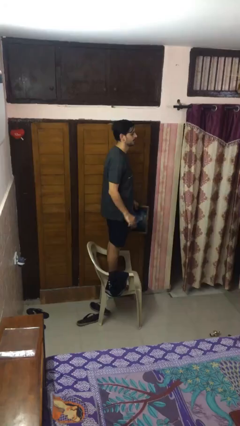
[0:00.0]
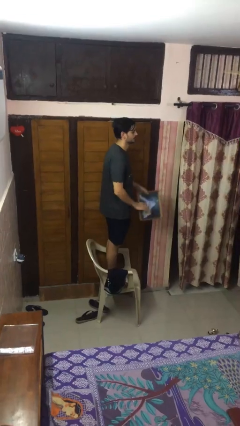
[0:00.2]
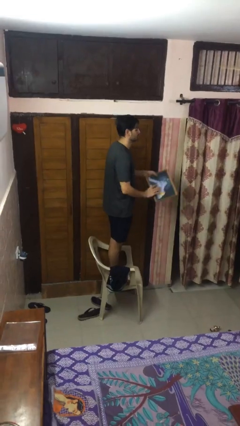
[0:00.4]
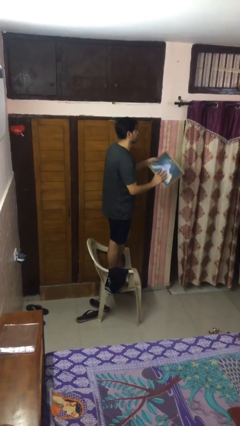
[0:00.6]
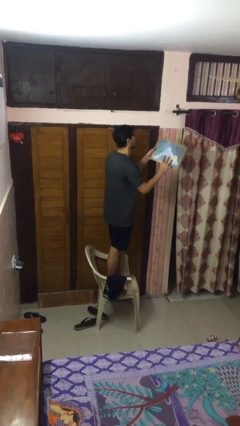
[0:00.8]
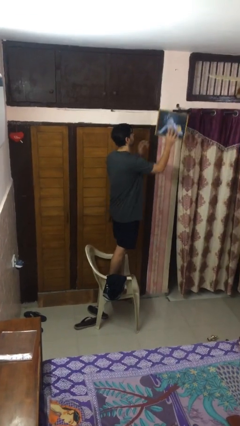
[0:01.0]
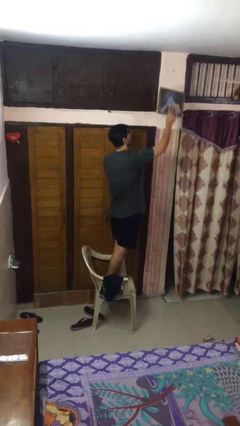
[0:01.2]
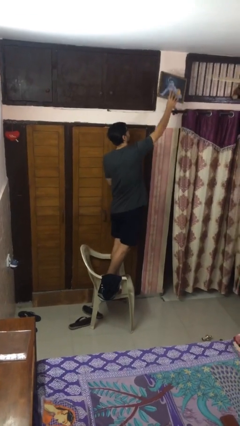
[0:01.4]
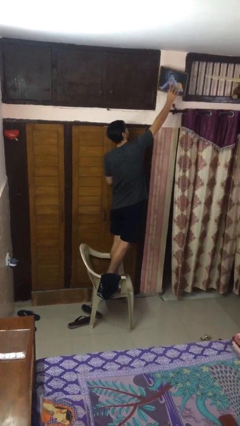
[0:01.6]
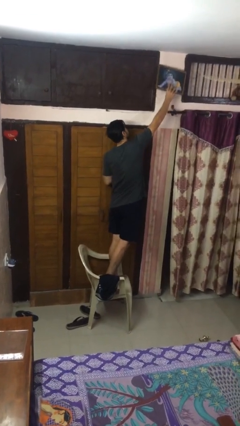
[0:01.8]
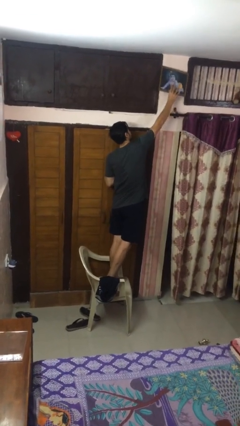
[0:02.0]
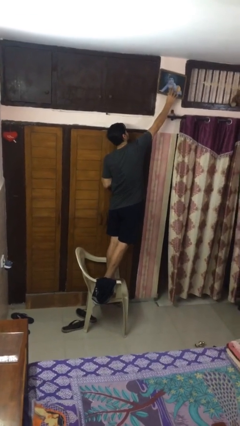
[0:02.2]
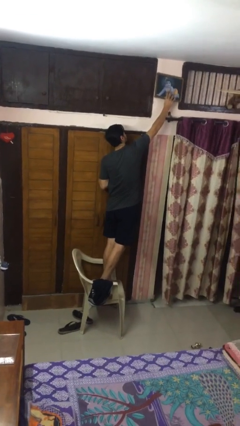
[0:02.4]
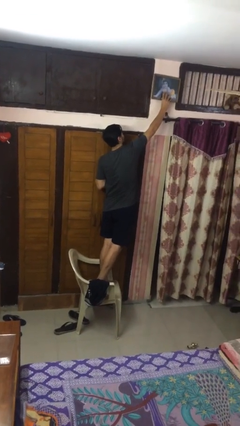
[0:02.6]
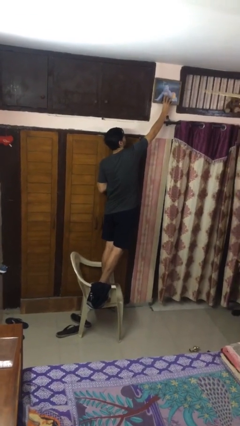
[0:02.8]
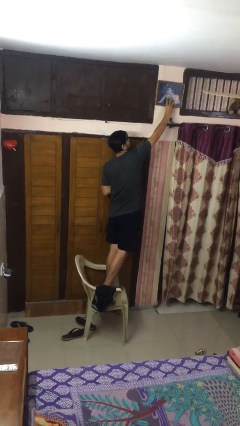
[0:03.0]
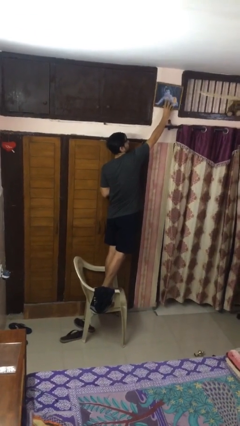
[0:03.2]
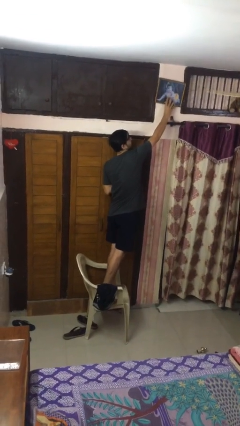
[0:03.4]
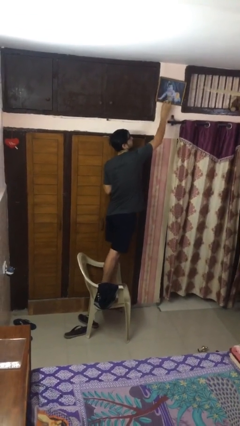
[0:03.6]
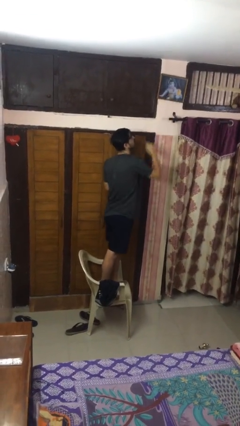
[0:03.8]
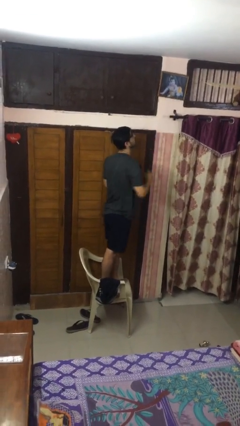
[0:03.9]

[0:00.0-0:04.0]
person puts up picture frame

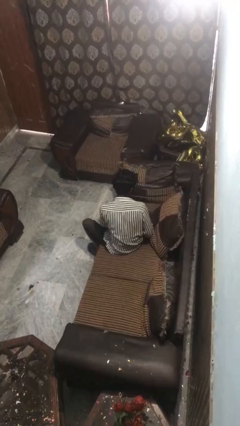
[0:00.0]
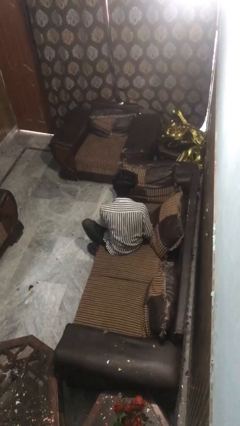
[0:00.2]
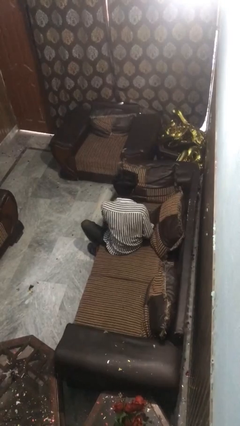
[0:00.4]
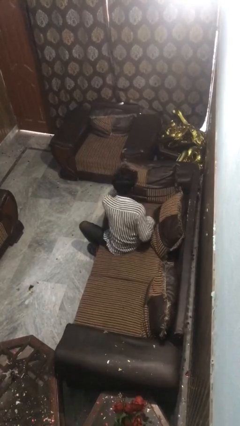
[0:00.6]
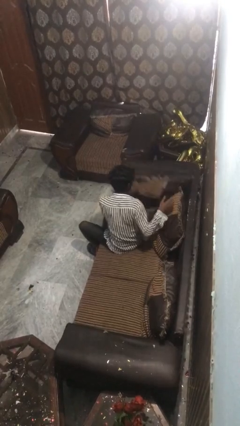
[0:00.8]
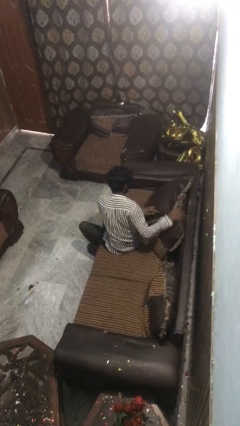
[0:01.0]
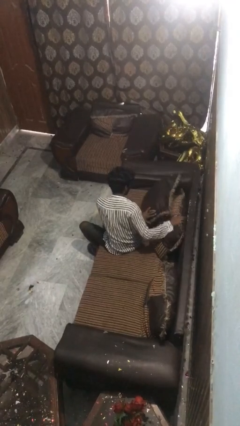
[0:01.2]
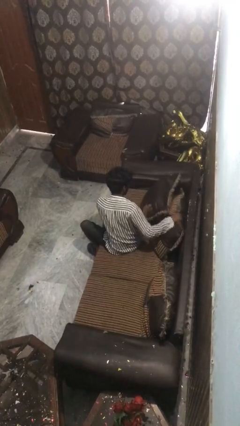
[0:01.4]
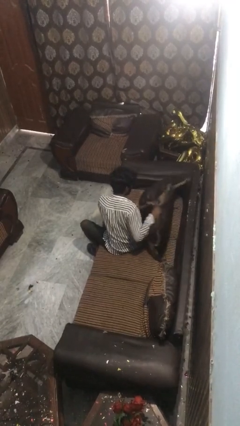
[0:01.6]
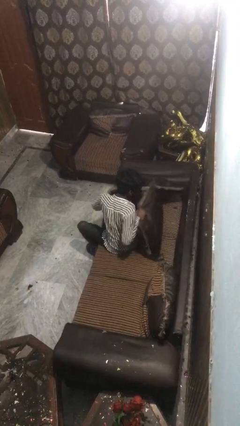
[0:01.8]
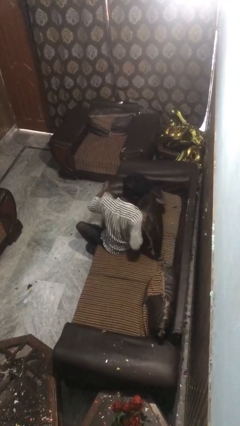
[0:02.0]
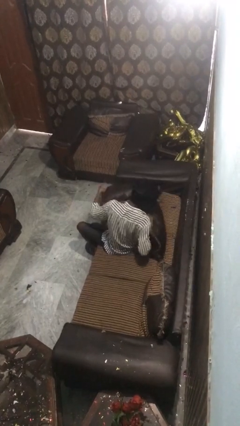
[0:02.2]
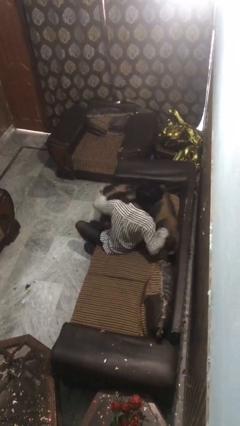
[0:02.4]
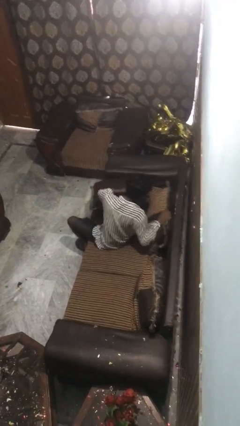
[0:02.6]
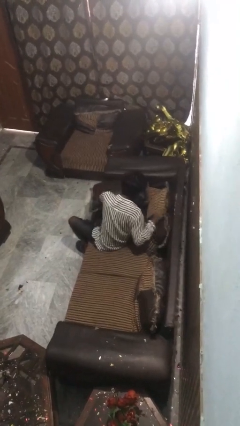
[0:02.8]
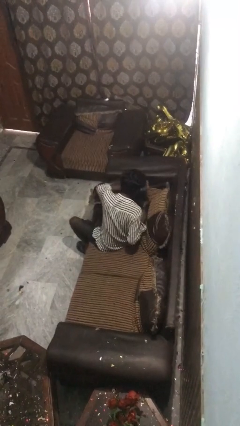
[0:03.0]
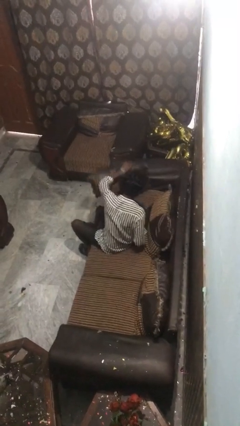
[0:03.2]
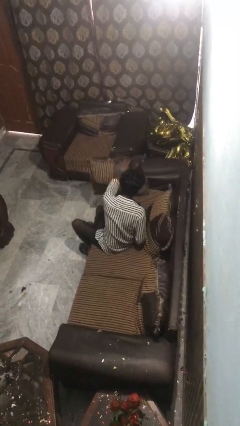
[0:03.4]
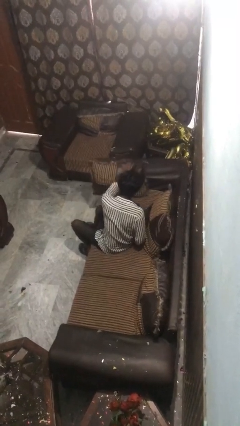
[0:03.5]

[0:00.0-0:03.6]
person searches in couch

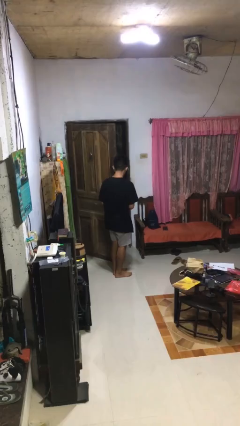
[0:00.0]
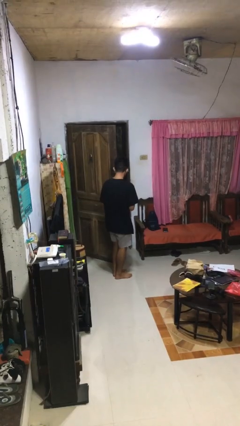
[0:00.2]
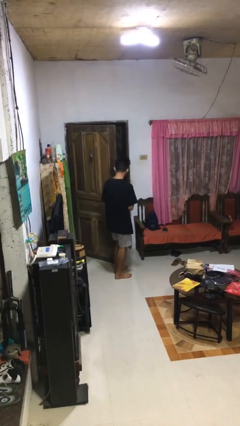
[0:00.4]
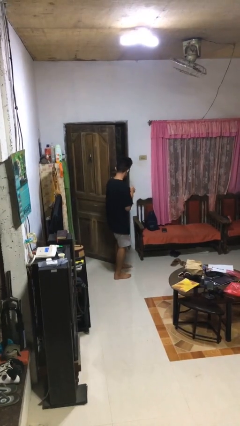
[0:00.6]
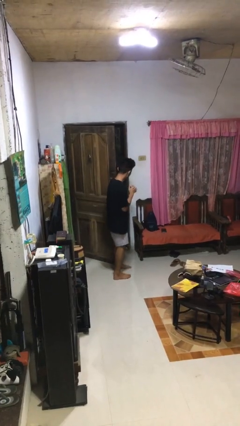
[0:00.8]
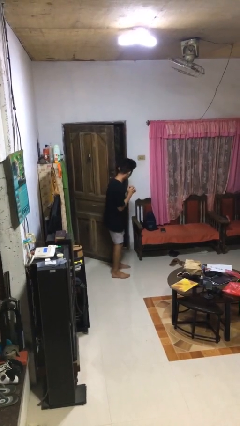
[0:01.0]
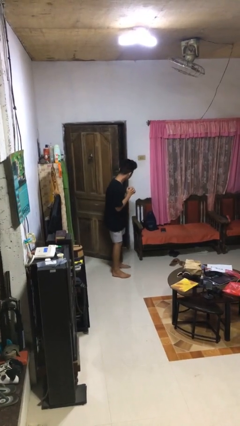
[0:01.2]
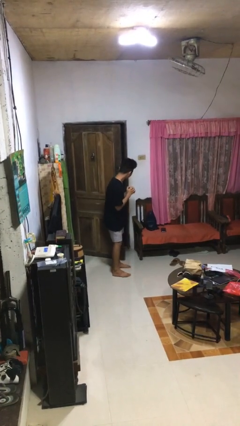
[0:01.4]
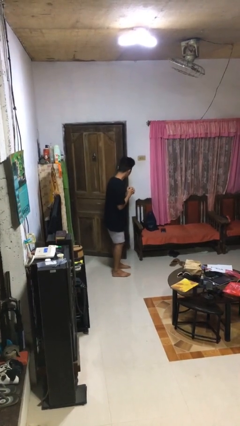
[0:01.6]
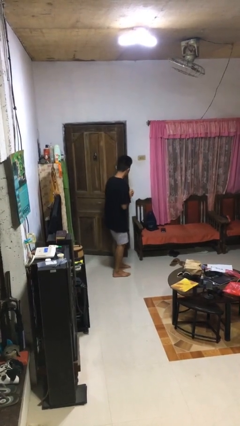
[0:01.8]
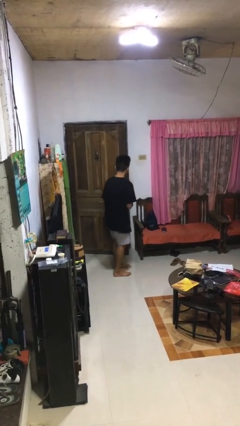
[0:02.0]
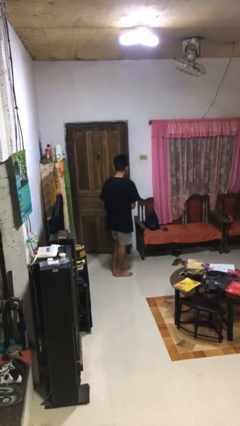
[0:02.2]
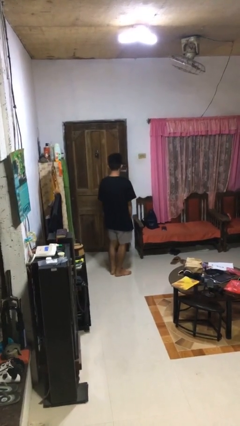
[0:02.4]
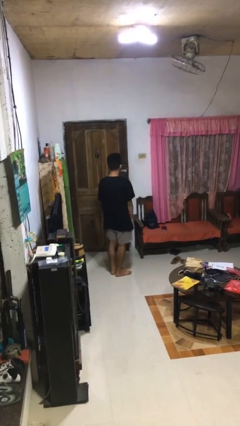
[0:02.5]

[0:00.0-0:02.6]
person closes door with hip

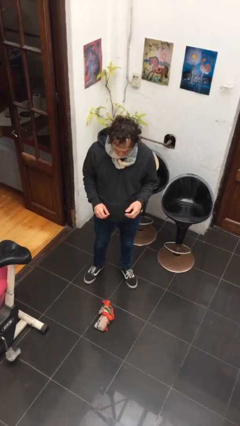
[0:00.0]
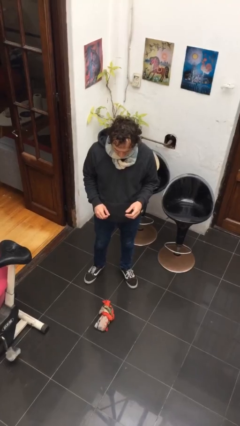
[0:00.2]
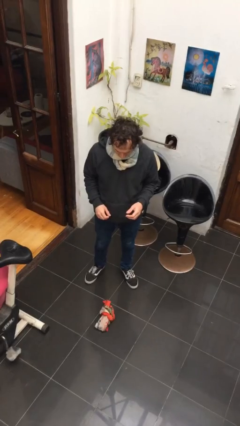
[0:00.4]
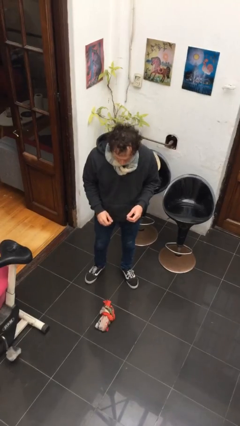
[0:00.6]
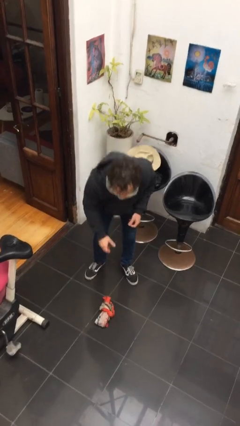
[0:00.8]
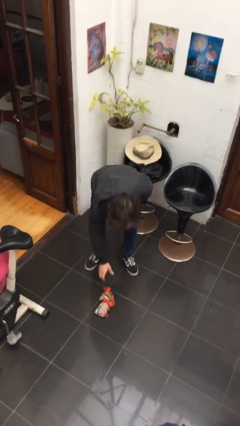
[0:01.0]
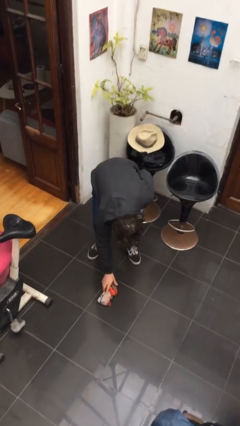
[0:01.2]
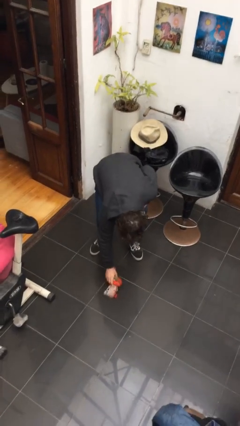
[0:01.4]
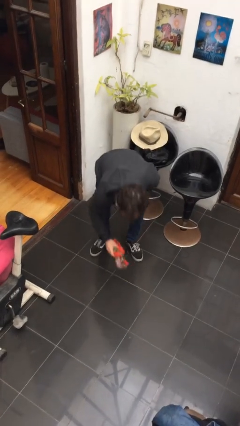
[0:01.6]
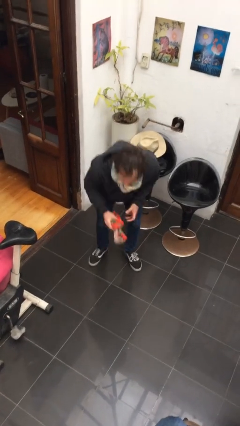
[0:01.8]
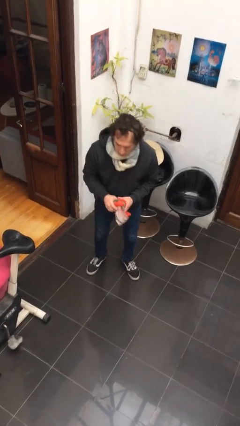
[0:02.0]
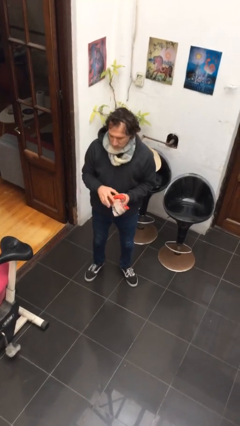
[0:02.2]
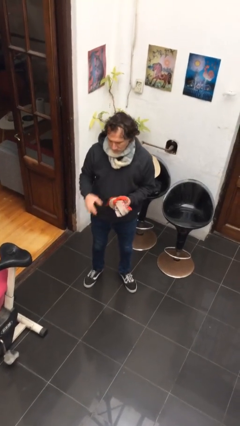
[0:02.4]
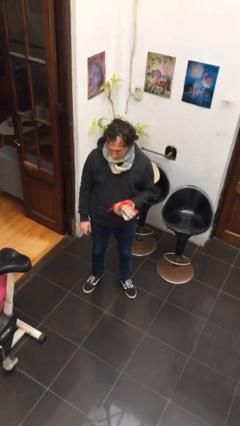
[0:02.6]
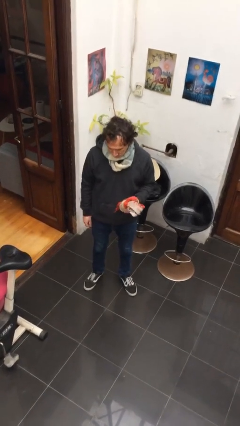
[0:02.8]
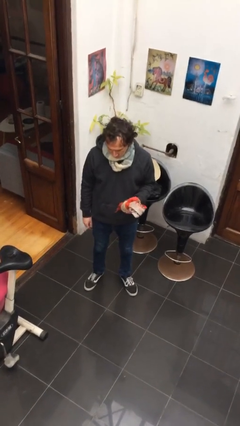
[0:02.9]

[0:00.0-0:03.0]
person picks up object from floor

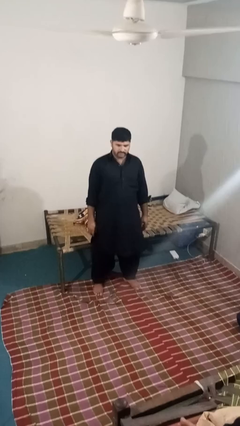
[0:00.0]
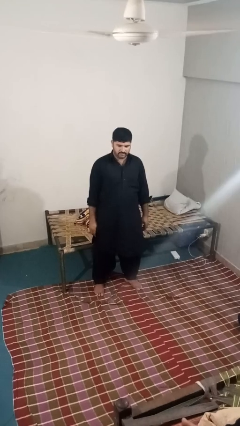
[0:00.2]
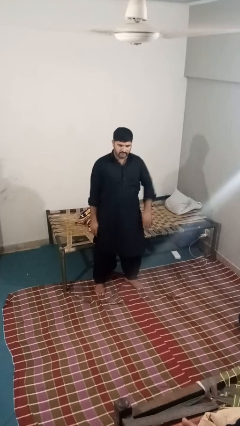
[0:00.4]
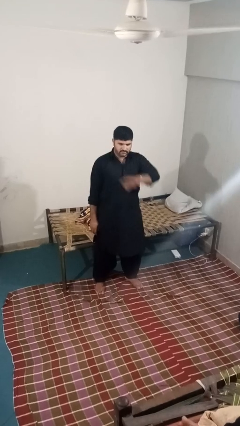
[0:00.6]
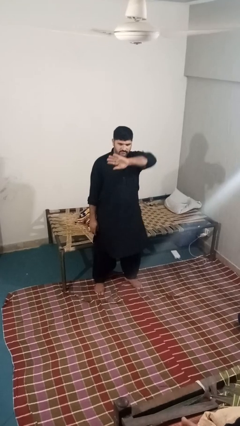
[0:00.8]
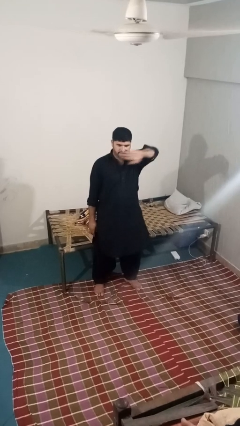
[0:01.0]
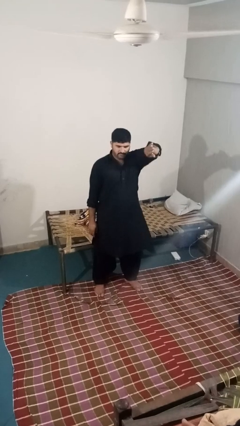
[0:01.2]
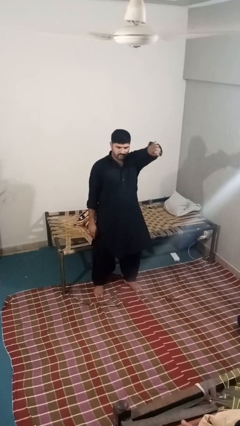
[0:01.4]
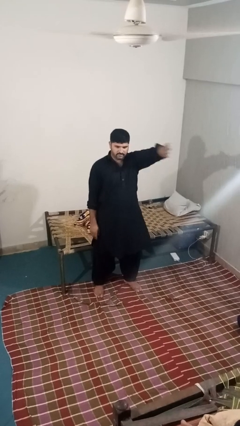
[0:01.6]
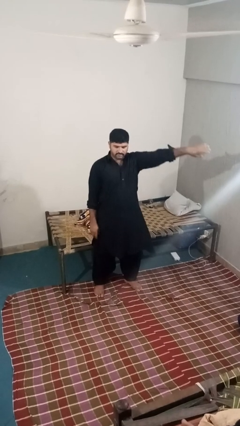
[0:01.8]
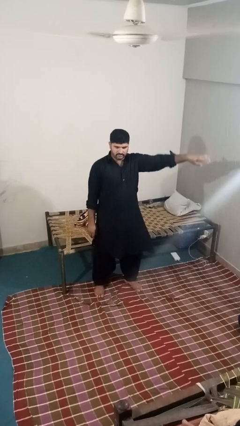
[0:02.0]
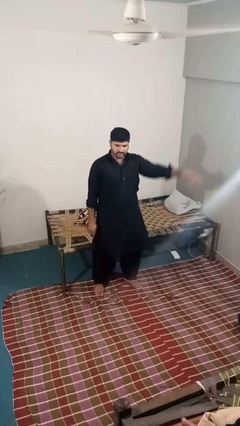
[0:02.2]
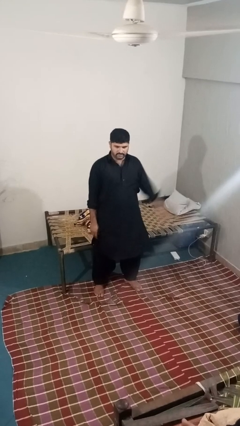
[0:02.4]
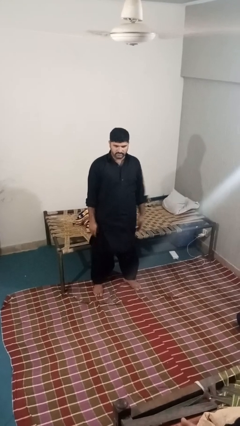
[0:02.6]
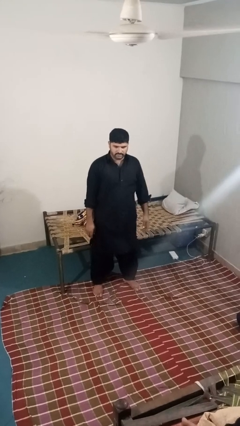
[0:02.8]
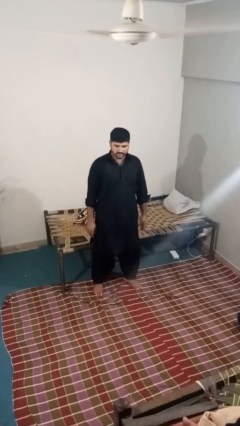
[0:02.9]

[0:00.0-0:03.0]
person gestures swipe left

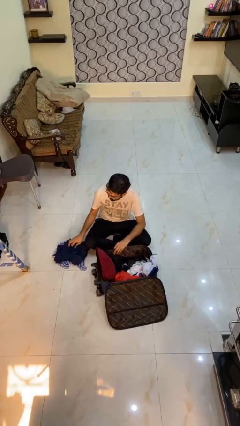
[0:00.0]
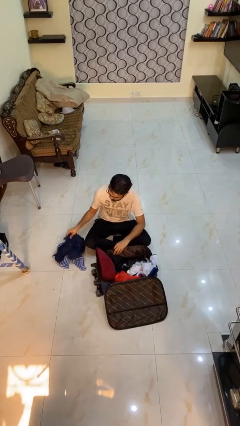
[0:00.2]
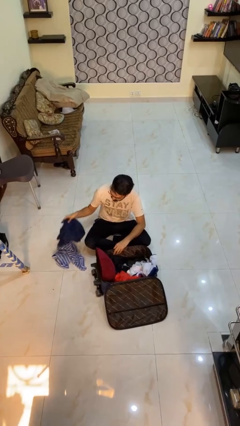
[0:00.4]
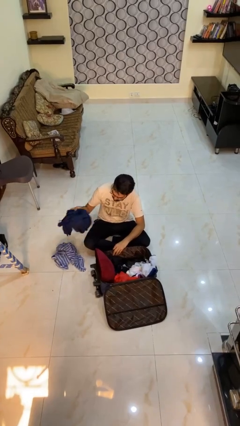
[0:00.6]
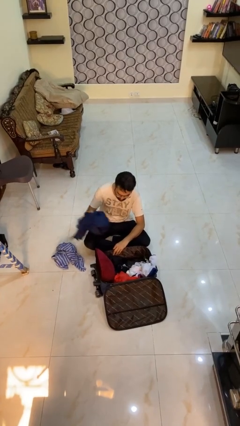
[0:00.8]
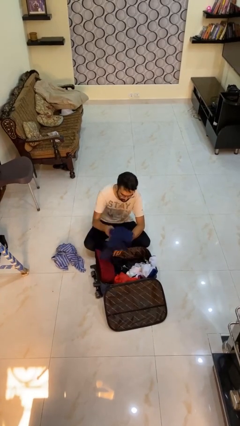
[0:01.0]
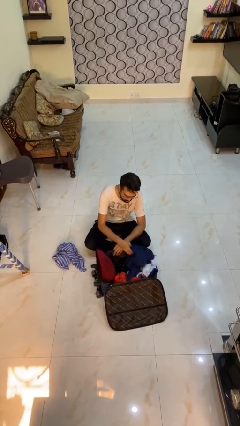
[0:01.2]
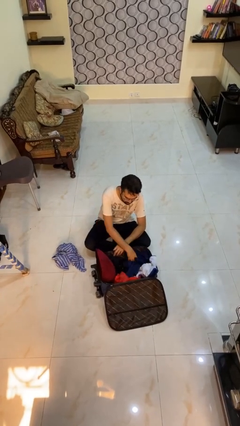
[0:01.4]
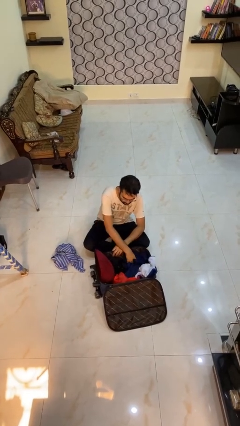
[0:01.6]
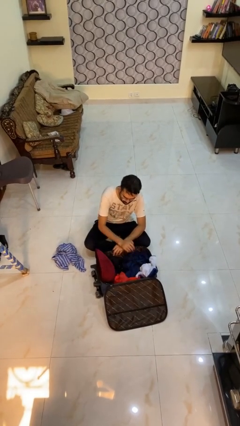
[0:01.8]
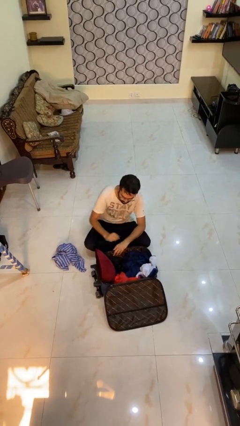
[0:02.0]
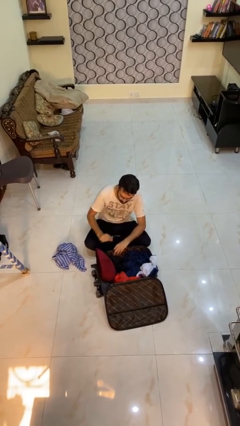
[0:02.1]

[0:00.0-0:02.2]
person loads clothes into suitcase
